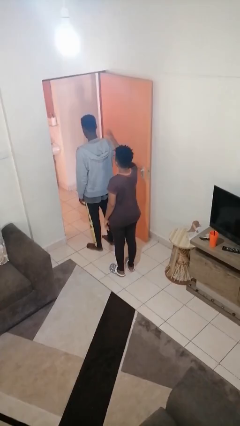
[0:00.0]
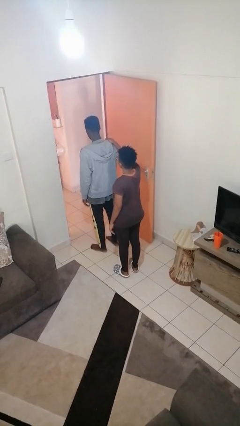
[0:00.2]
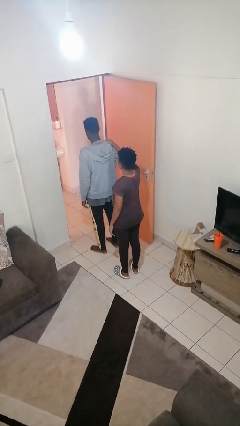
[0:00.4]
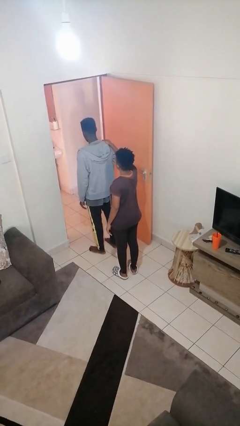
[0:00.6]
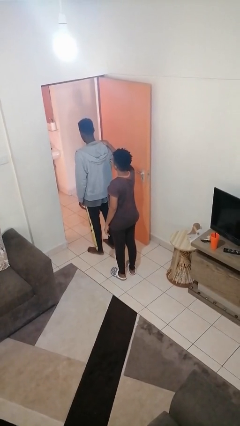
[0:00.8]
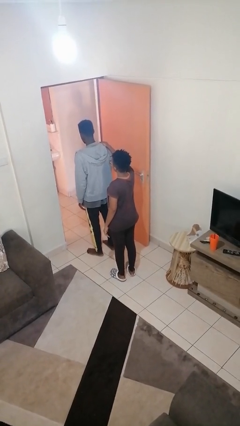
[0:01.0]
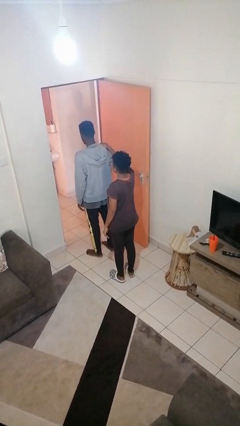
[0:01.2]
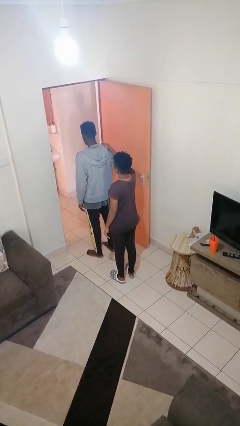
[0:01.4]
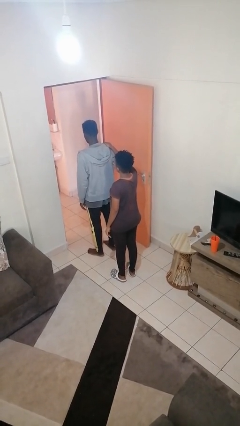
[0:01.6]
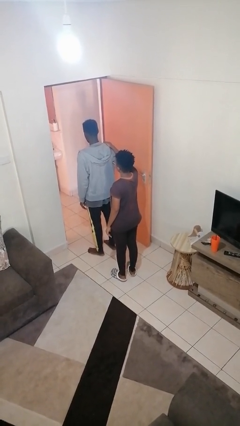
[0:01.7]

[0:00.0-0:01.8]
person grabs person by shoulder

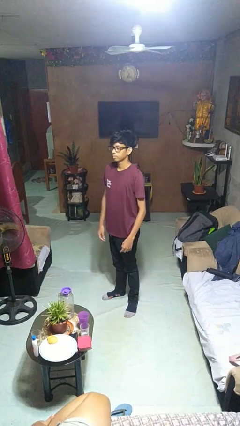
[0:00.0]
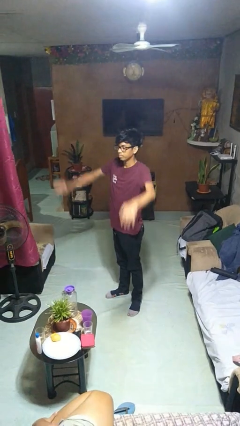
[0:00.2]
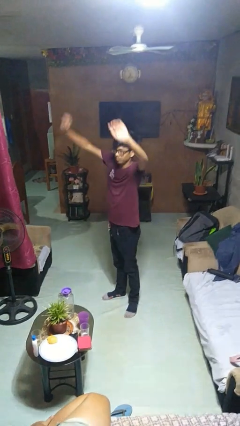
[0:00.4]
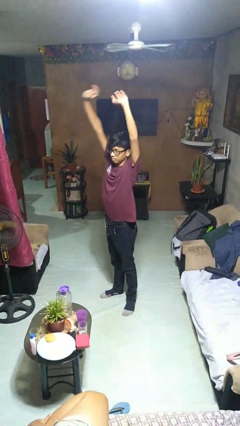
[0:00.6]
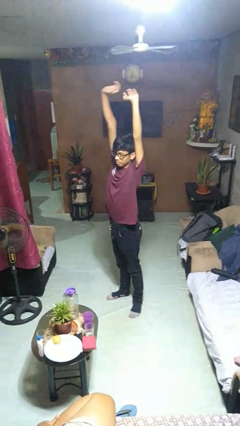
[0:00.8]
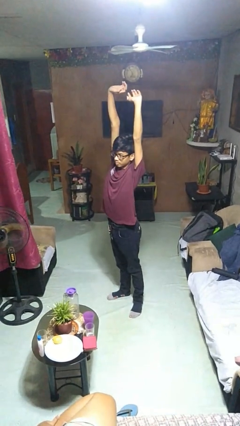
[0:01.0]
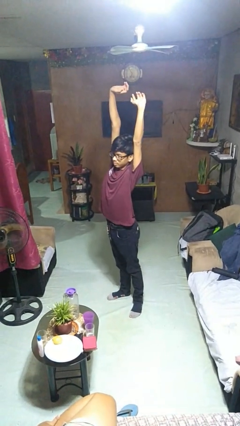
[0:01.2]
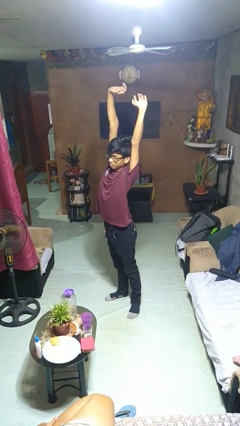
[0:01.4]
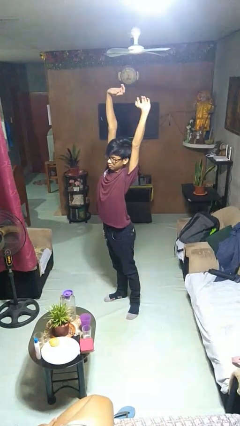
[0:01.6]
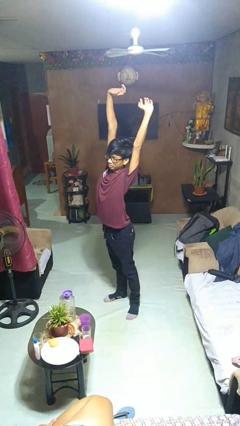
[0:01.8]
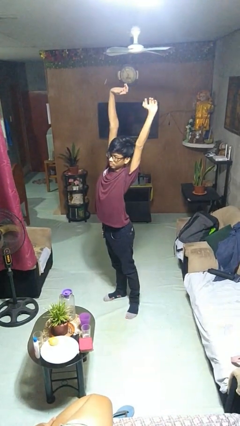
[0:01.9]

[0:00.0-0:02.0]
person stretches arms over head

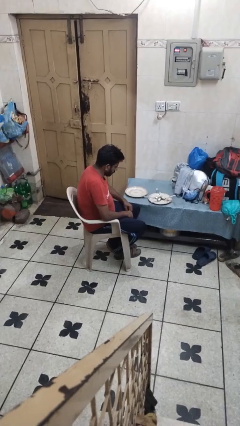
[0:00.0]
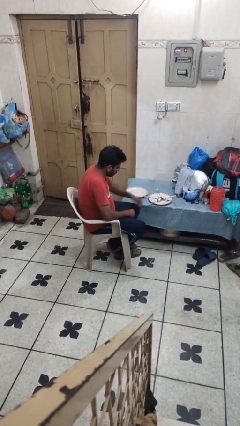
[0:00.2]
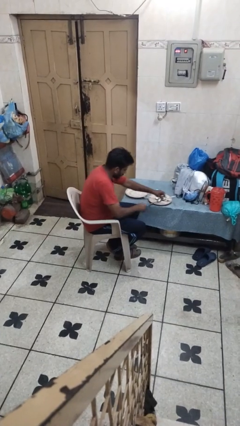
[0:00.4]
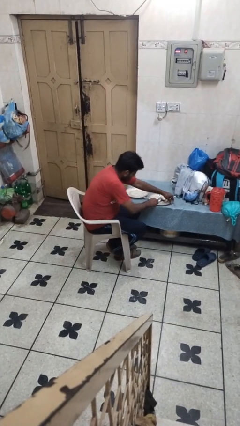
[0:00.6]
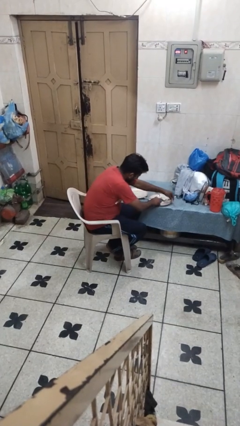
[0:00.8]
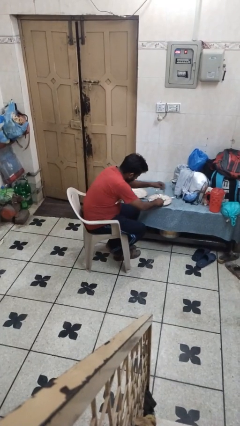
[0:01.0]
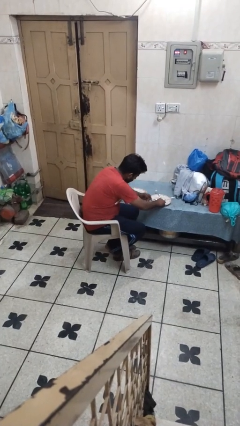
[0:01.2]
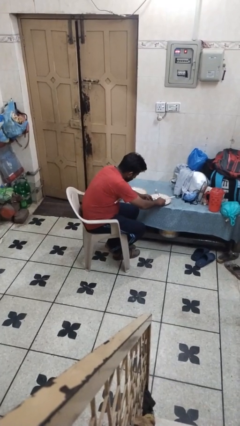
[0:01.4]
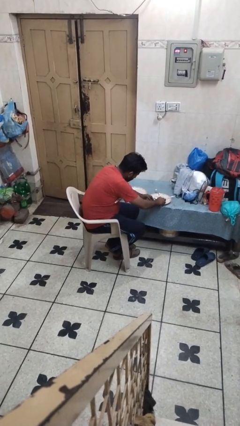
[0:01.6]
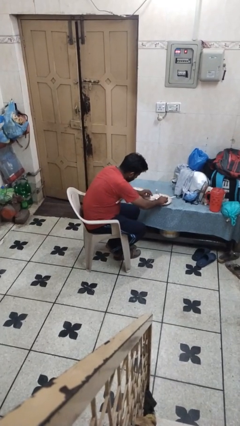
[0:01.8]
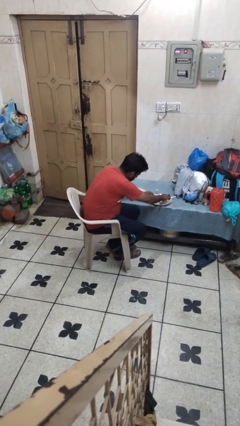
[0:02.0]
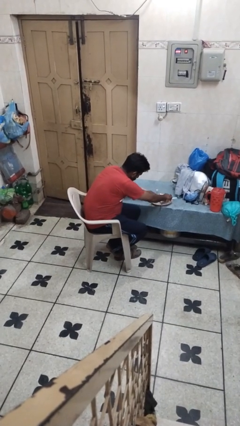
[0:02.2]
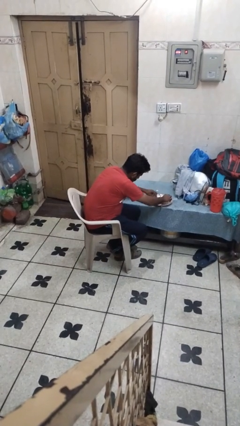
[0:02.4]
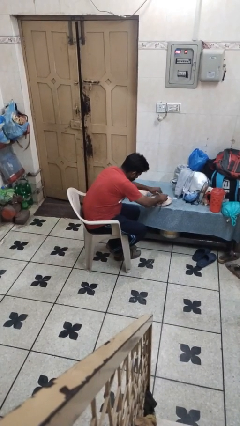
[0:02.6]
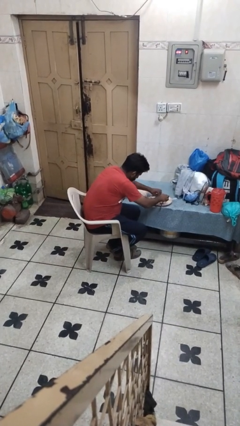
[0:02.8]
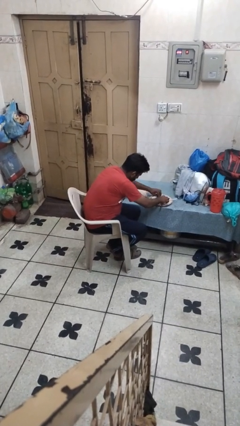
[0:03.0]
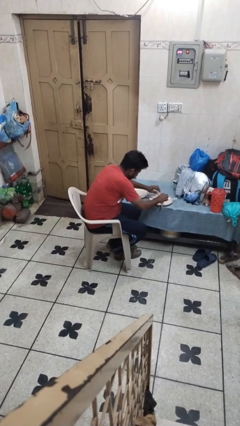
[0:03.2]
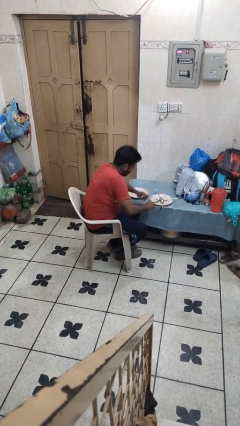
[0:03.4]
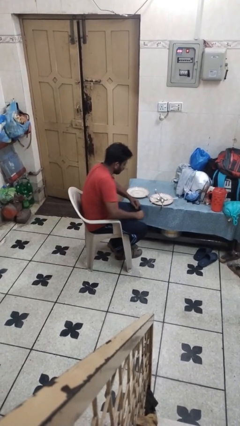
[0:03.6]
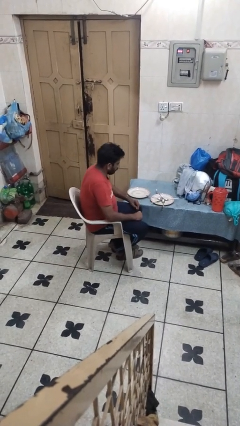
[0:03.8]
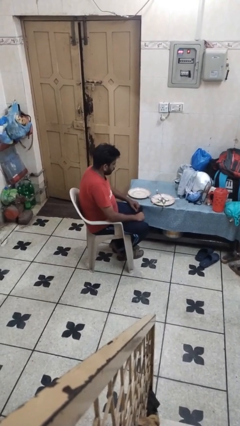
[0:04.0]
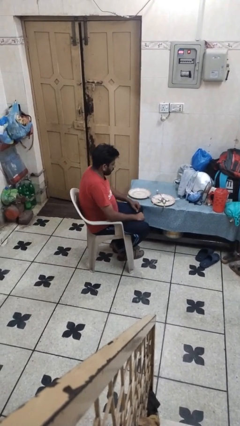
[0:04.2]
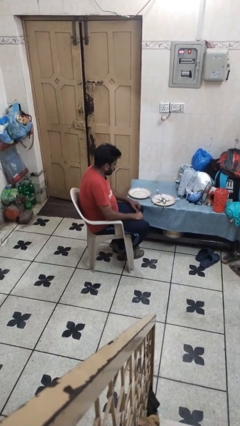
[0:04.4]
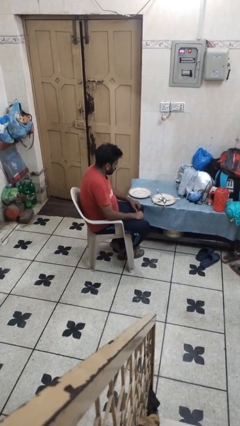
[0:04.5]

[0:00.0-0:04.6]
person sets table

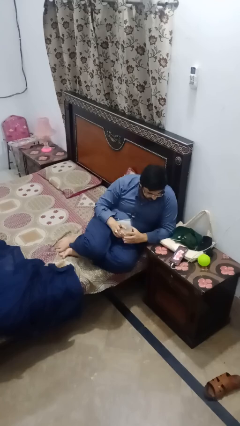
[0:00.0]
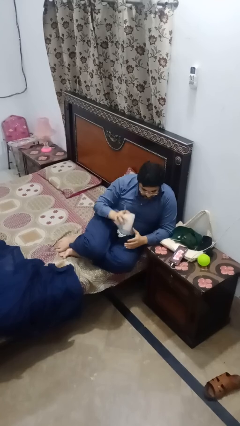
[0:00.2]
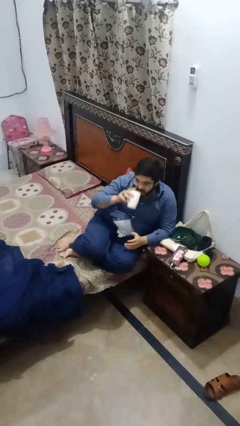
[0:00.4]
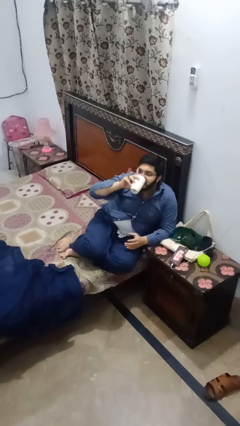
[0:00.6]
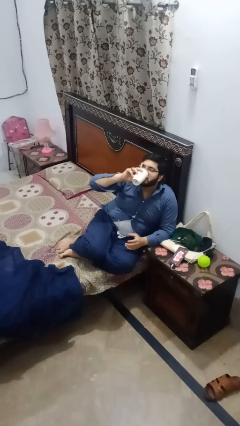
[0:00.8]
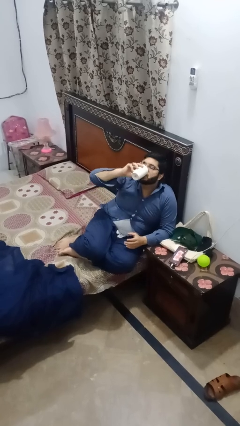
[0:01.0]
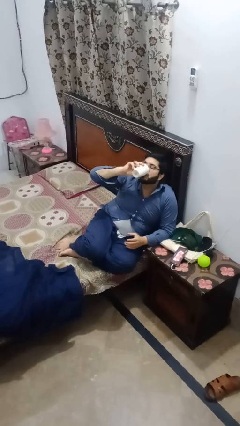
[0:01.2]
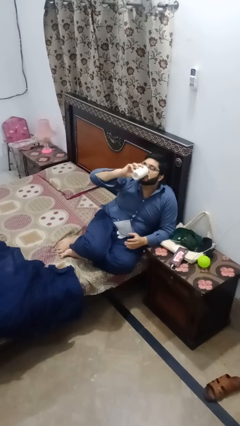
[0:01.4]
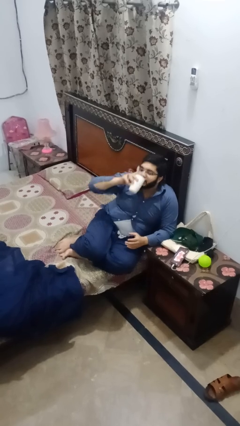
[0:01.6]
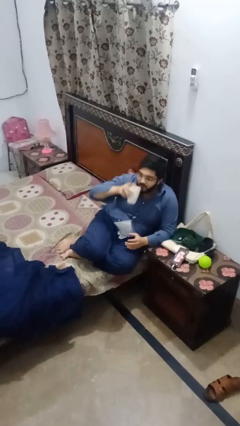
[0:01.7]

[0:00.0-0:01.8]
person drinks from mug

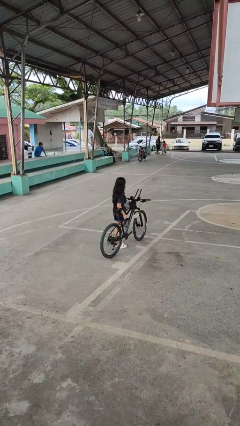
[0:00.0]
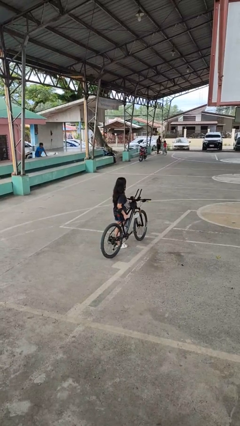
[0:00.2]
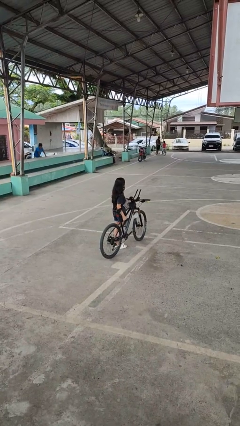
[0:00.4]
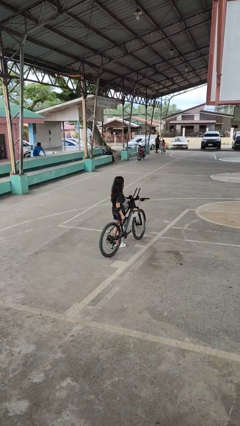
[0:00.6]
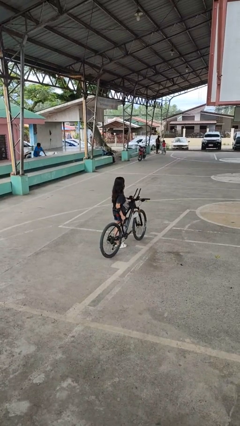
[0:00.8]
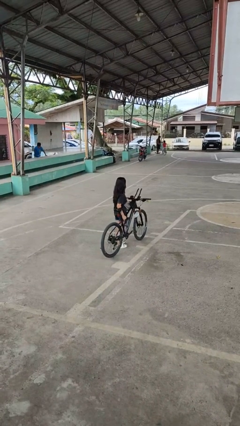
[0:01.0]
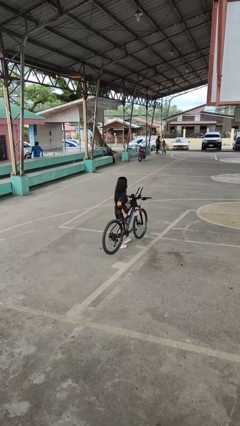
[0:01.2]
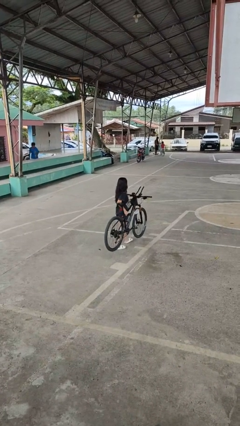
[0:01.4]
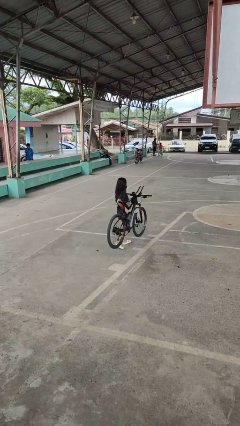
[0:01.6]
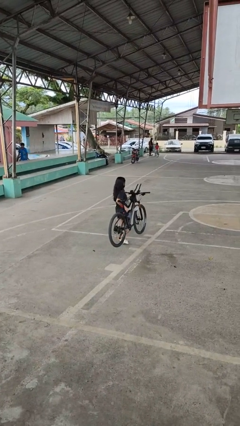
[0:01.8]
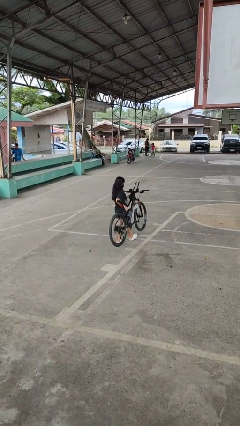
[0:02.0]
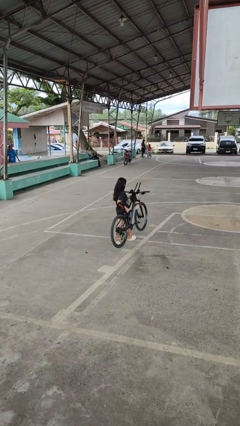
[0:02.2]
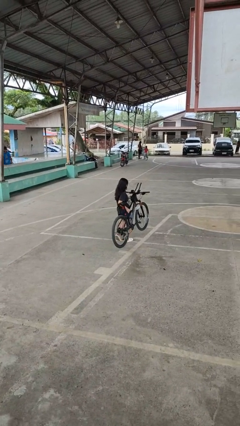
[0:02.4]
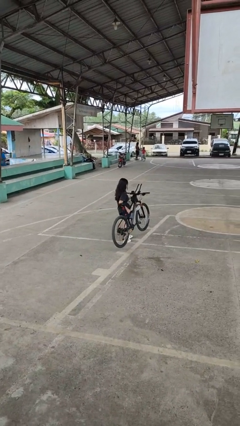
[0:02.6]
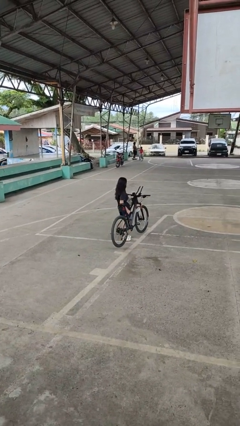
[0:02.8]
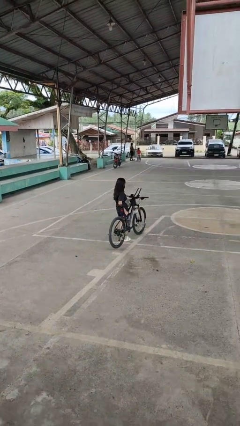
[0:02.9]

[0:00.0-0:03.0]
person carries bicycle

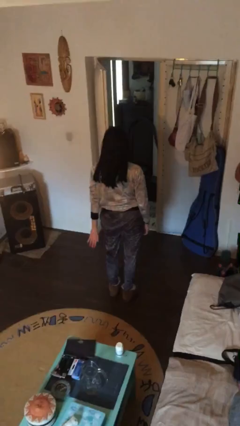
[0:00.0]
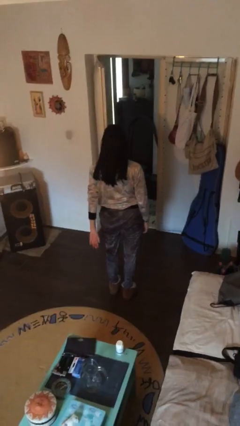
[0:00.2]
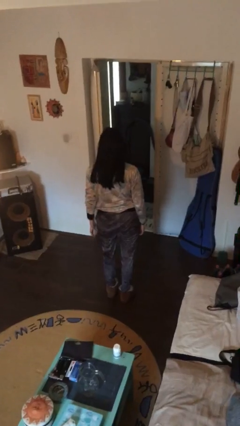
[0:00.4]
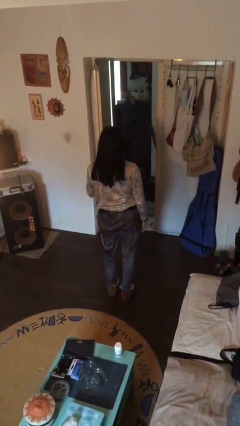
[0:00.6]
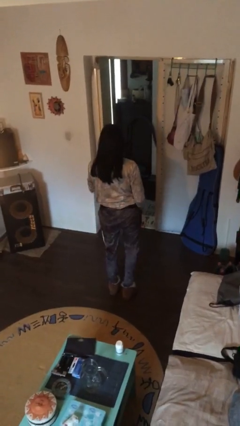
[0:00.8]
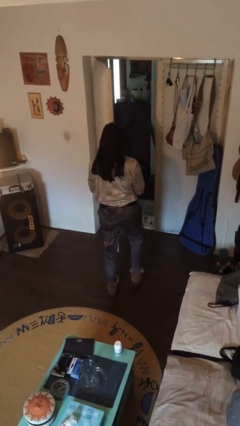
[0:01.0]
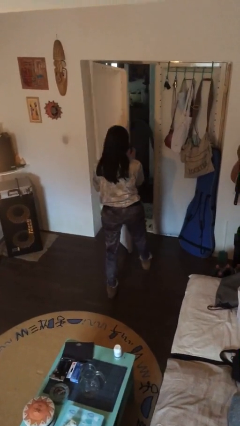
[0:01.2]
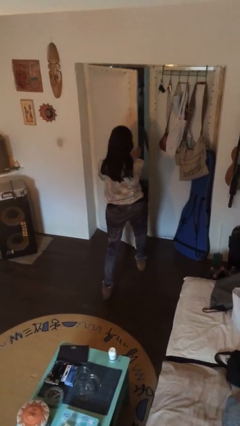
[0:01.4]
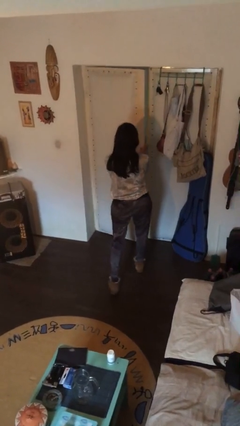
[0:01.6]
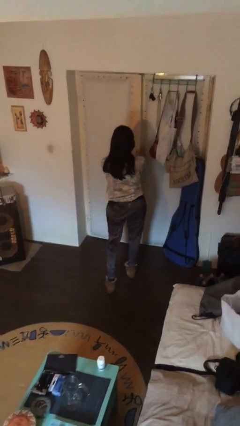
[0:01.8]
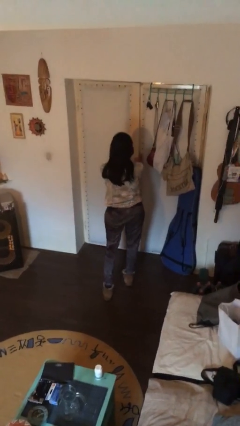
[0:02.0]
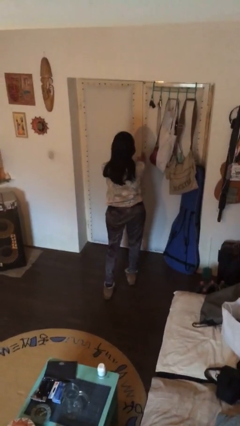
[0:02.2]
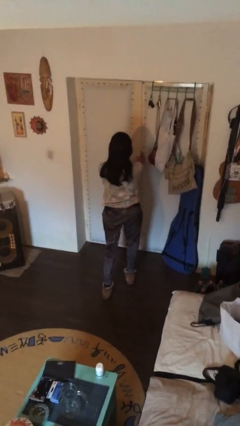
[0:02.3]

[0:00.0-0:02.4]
person closes facility door

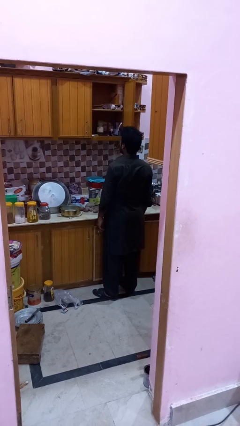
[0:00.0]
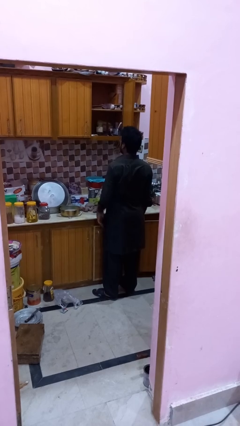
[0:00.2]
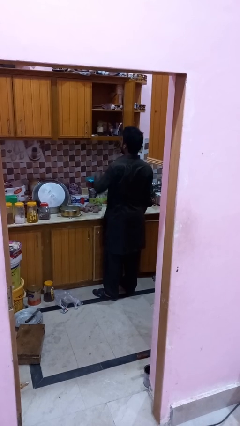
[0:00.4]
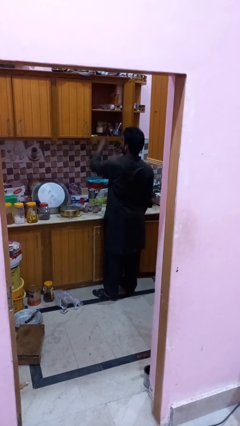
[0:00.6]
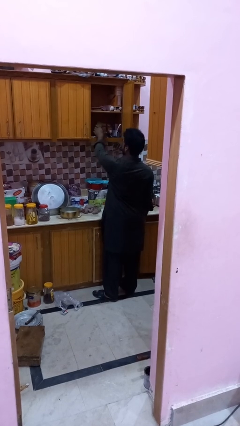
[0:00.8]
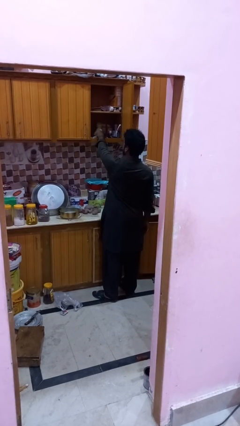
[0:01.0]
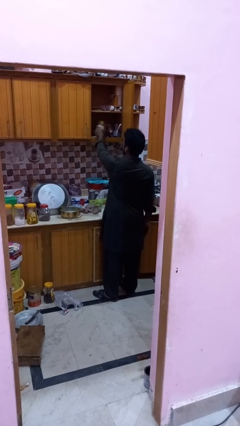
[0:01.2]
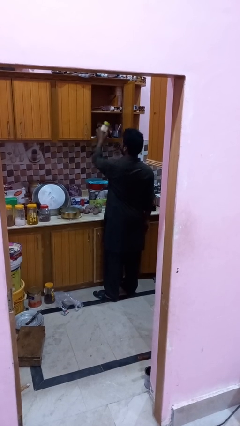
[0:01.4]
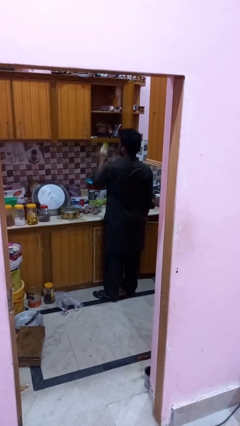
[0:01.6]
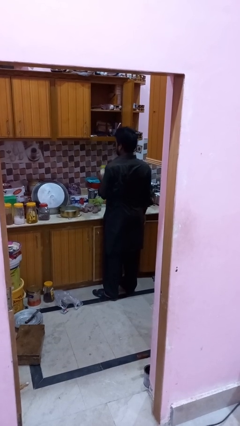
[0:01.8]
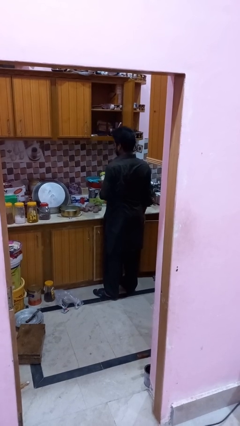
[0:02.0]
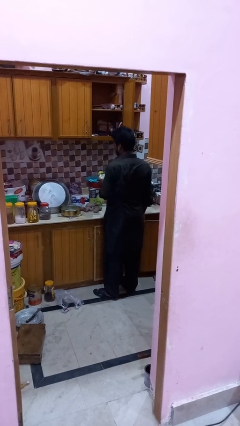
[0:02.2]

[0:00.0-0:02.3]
person takes object from cabinet
